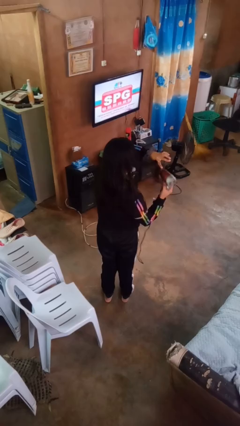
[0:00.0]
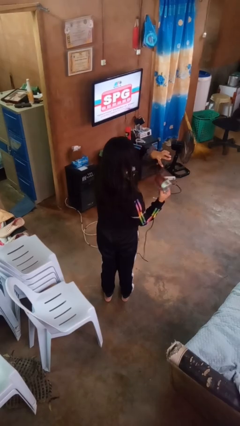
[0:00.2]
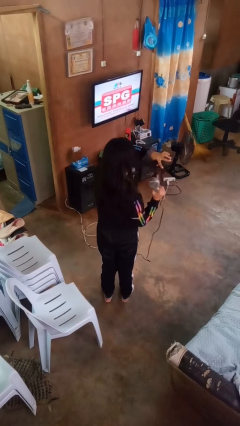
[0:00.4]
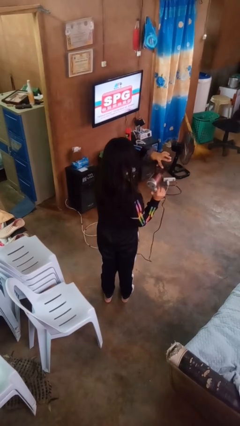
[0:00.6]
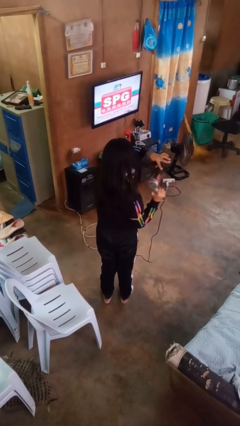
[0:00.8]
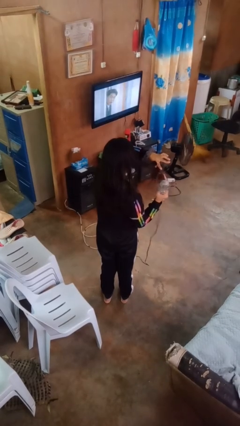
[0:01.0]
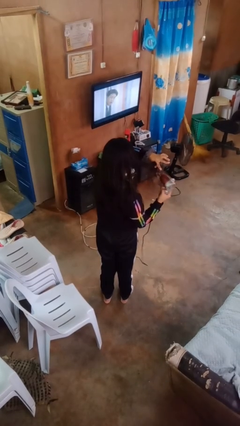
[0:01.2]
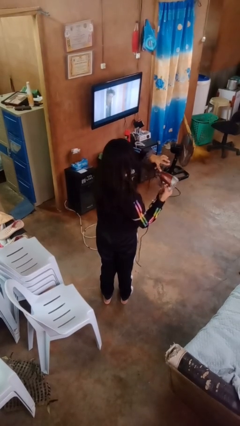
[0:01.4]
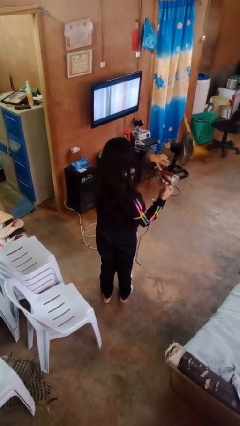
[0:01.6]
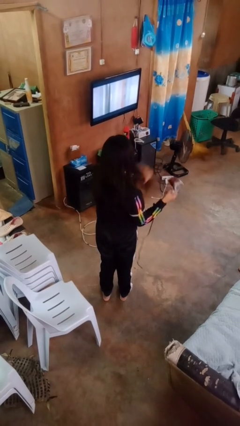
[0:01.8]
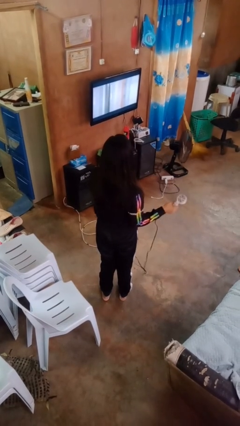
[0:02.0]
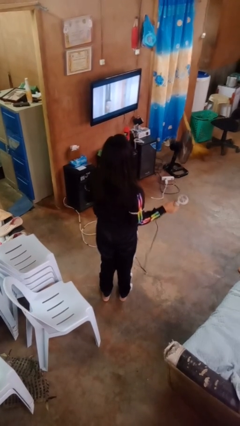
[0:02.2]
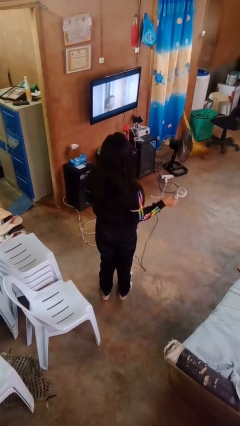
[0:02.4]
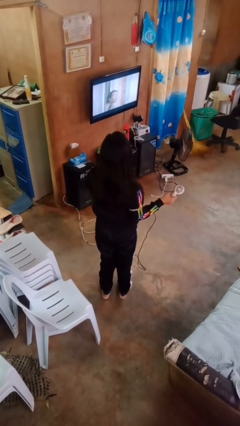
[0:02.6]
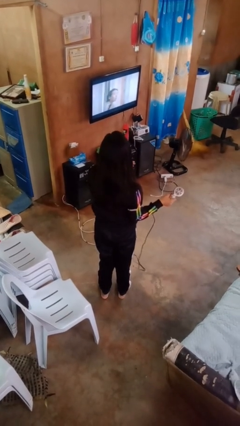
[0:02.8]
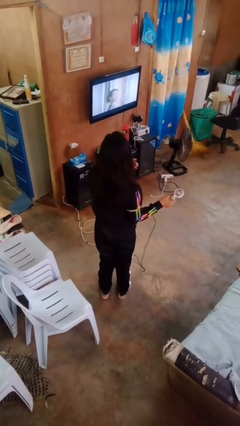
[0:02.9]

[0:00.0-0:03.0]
person dries hair with hairdryer

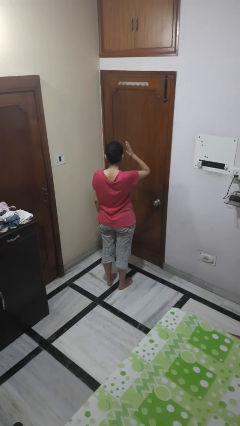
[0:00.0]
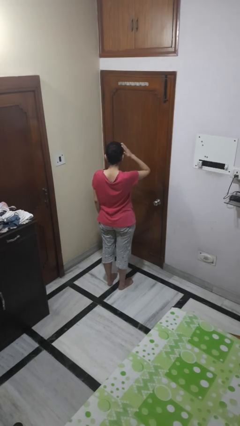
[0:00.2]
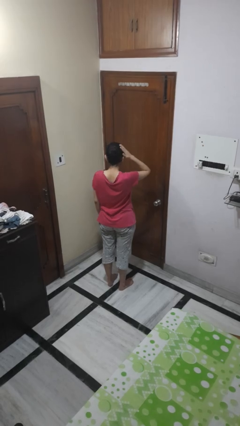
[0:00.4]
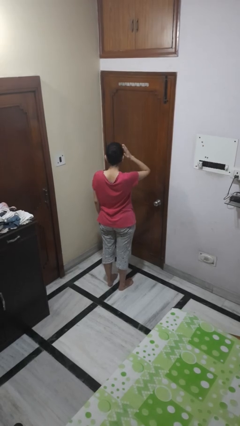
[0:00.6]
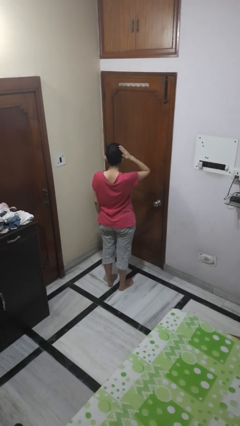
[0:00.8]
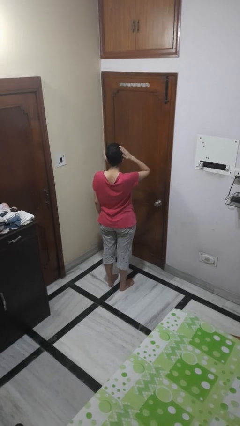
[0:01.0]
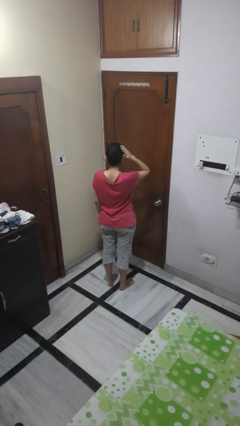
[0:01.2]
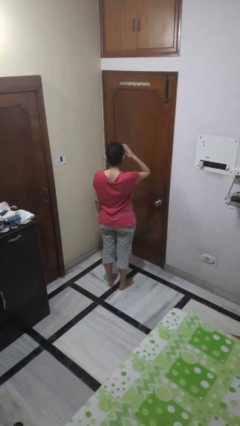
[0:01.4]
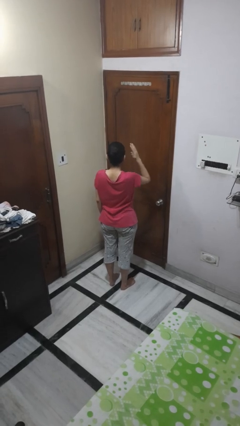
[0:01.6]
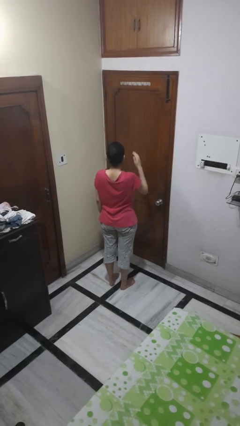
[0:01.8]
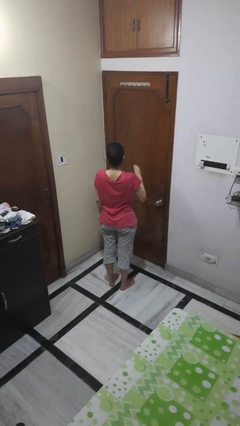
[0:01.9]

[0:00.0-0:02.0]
person pats head

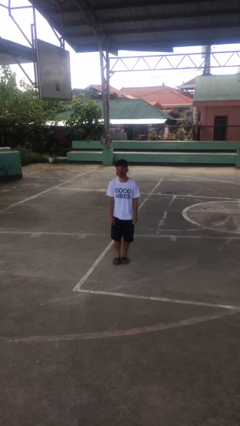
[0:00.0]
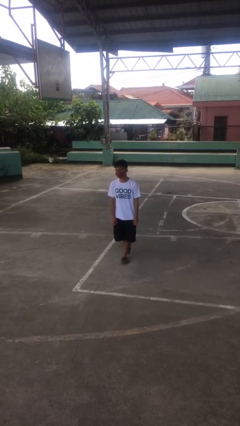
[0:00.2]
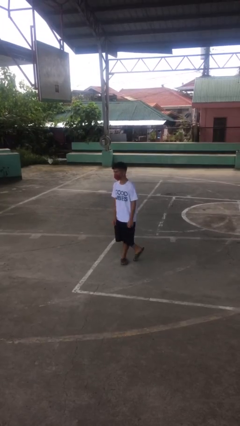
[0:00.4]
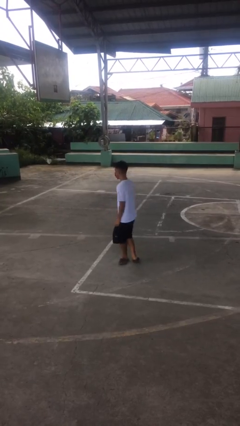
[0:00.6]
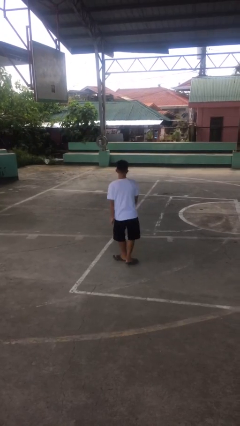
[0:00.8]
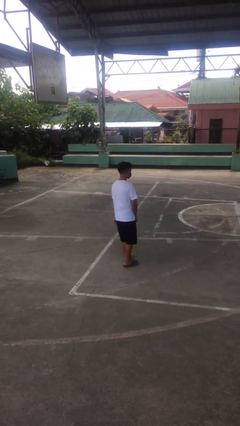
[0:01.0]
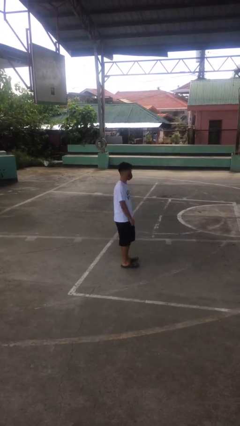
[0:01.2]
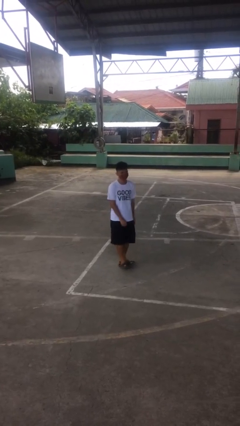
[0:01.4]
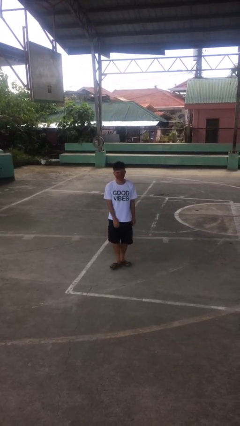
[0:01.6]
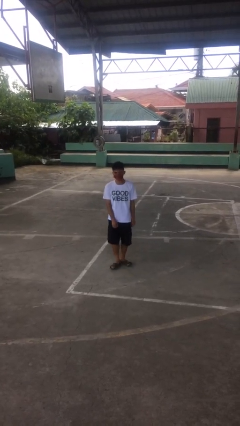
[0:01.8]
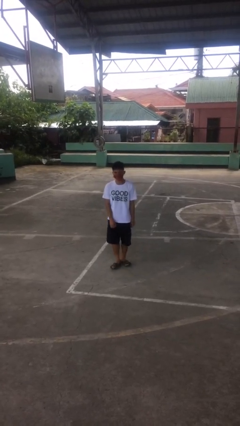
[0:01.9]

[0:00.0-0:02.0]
person twirls

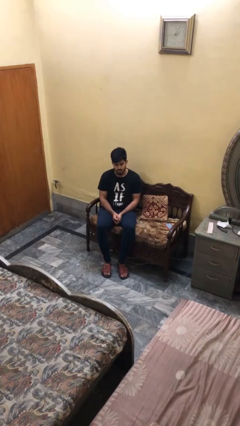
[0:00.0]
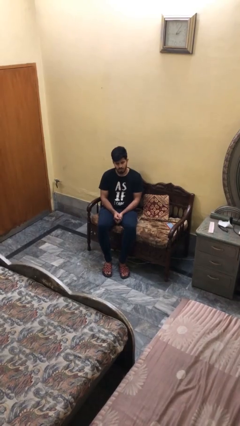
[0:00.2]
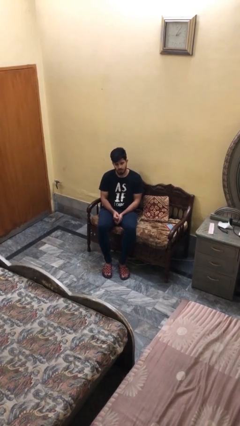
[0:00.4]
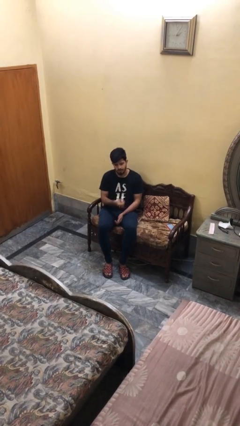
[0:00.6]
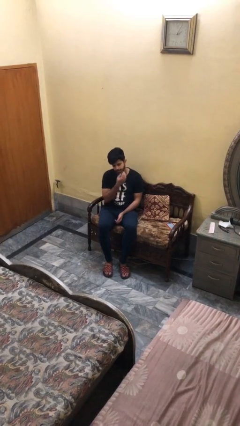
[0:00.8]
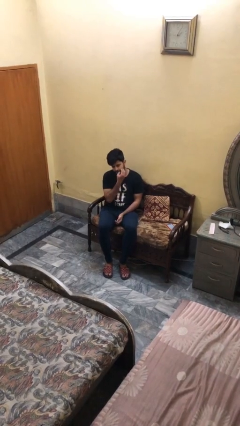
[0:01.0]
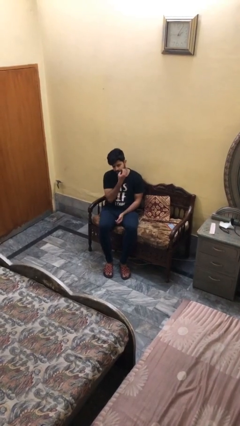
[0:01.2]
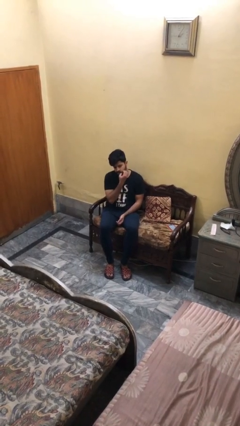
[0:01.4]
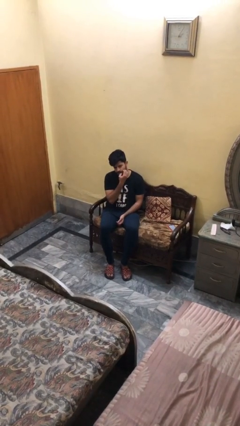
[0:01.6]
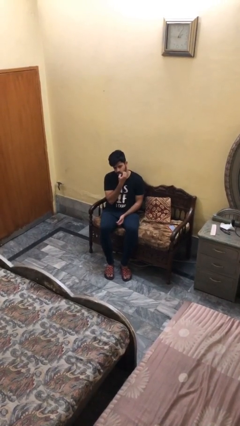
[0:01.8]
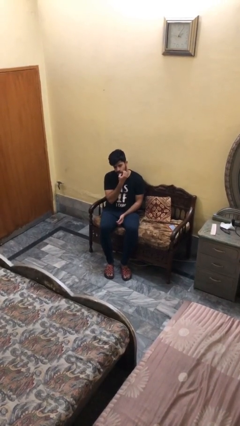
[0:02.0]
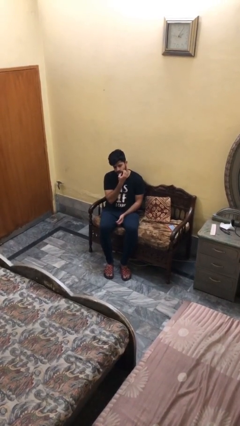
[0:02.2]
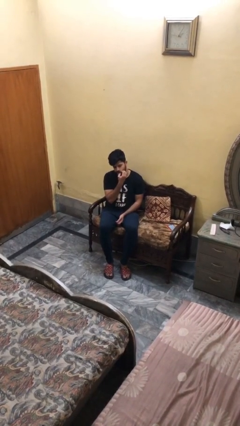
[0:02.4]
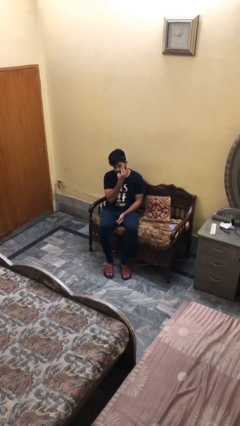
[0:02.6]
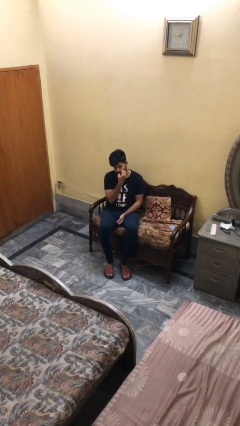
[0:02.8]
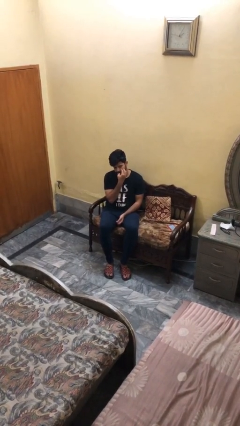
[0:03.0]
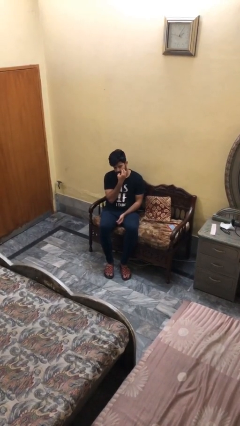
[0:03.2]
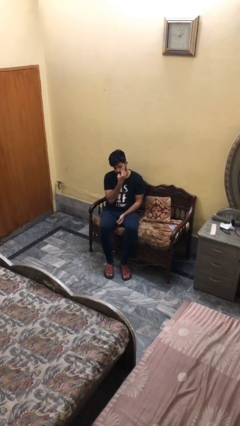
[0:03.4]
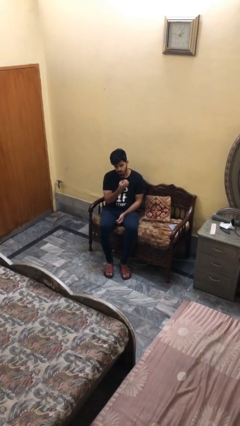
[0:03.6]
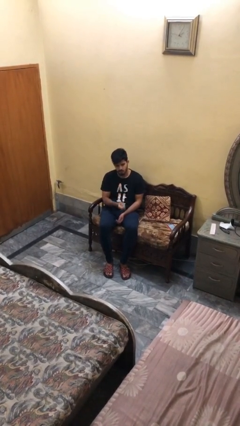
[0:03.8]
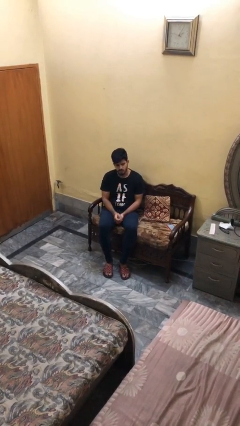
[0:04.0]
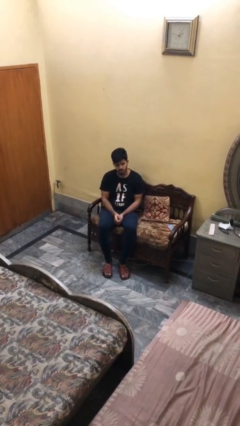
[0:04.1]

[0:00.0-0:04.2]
person scratches face

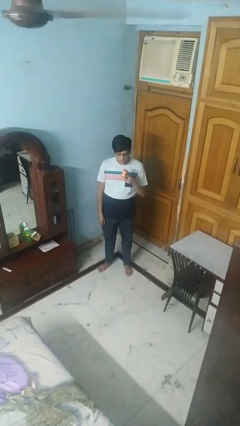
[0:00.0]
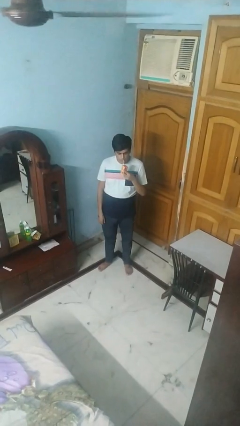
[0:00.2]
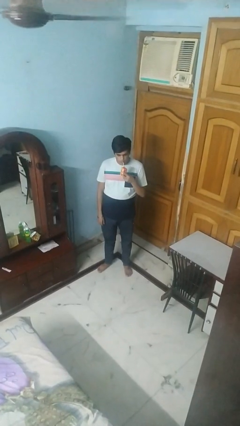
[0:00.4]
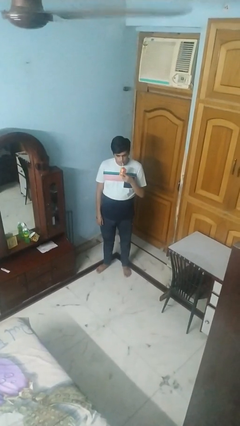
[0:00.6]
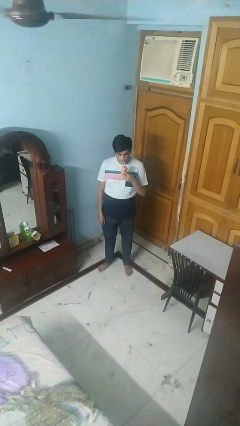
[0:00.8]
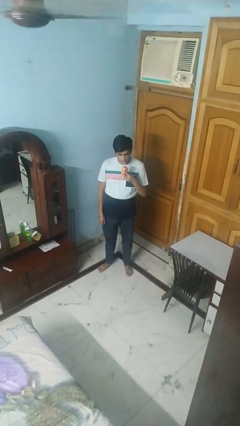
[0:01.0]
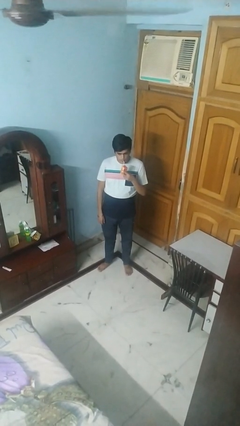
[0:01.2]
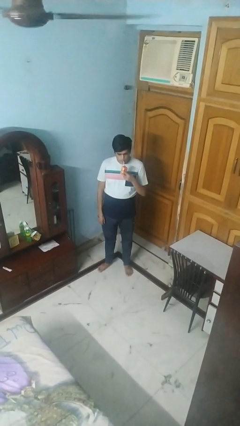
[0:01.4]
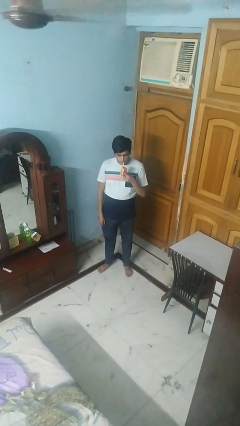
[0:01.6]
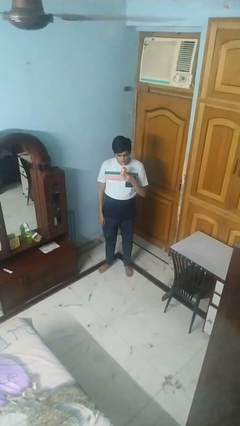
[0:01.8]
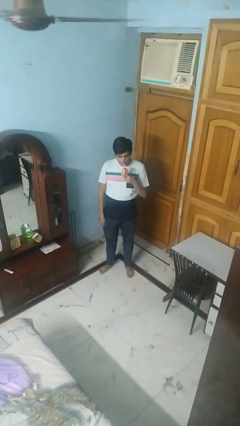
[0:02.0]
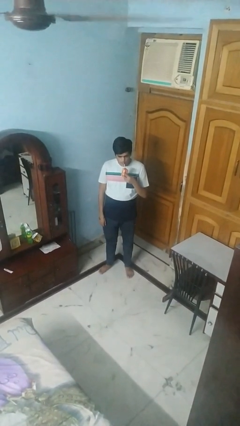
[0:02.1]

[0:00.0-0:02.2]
person drinks from straw

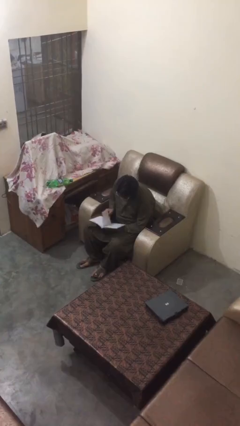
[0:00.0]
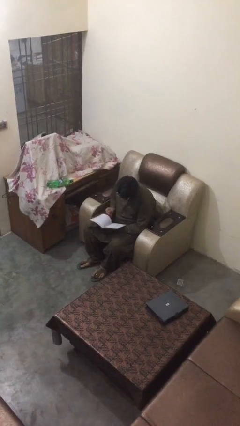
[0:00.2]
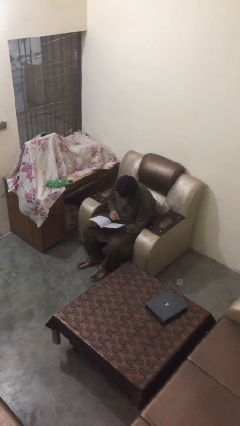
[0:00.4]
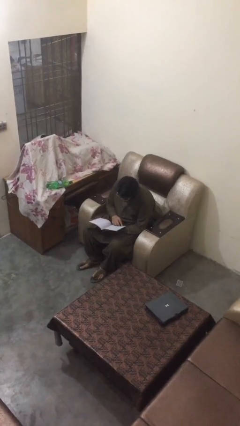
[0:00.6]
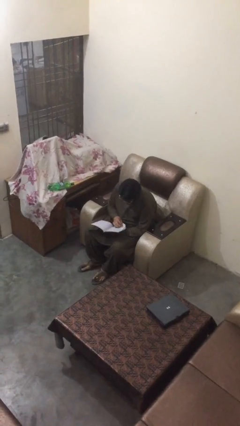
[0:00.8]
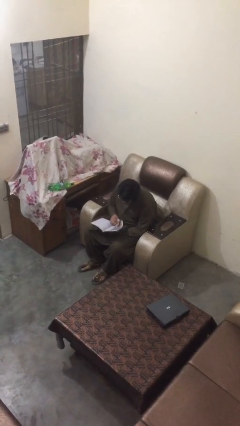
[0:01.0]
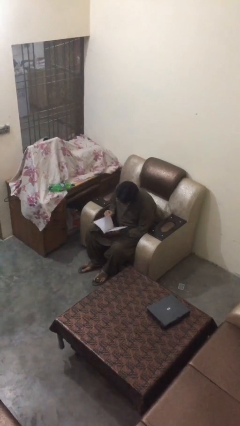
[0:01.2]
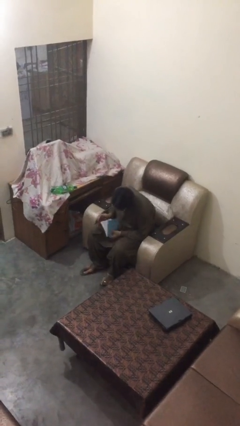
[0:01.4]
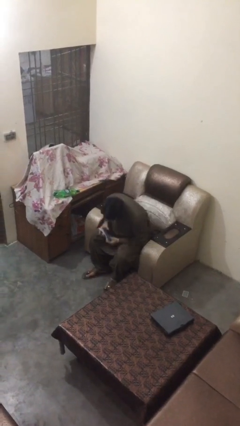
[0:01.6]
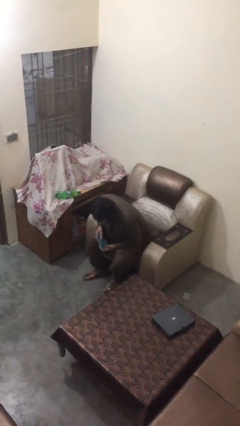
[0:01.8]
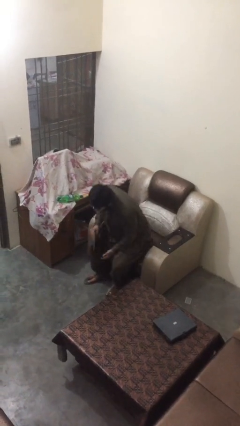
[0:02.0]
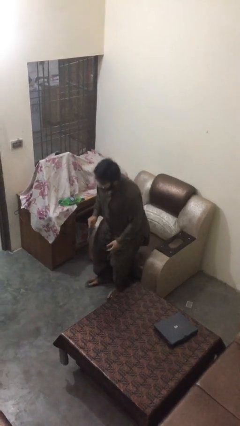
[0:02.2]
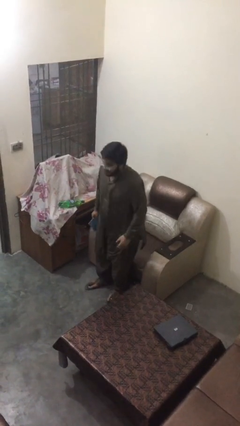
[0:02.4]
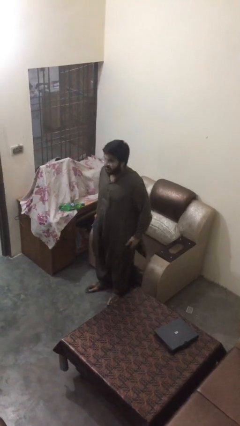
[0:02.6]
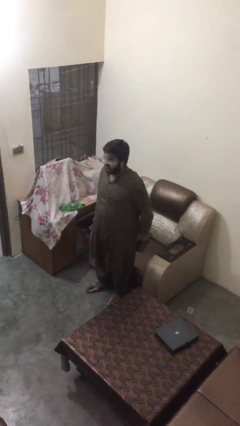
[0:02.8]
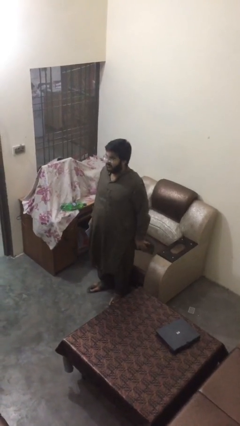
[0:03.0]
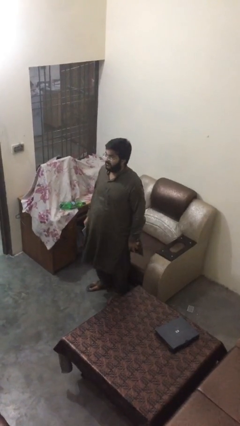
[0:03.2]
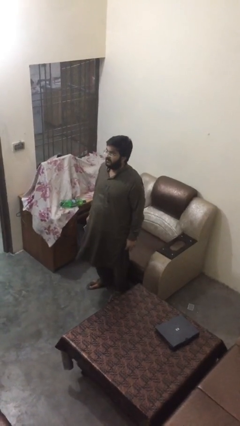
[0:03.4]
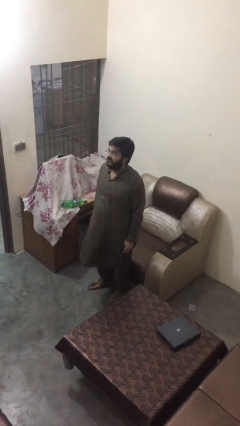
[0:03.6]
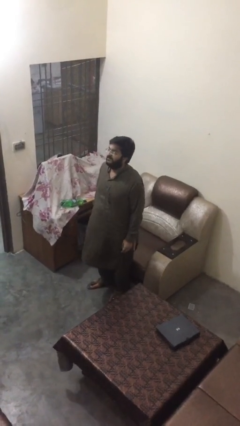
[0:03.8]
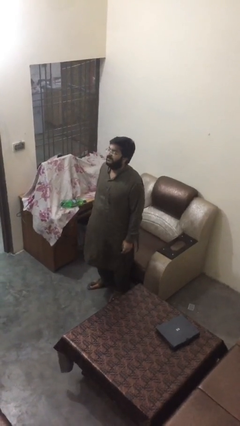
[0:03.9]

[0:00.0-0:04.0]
person stands up
